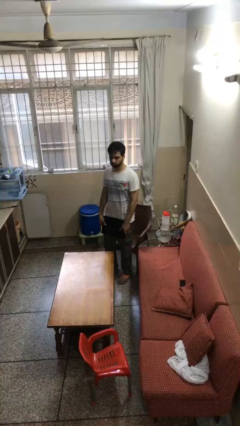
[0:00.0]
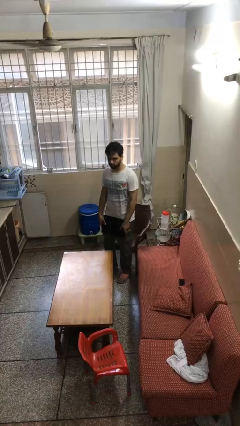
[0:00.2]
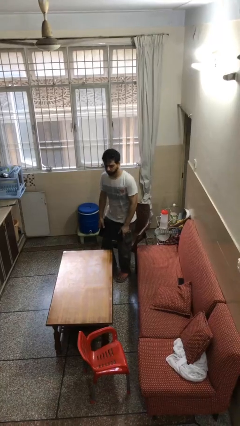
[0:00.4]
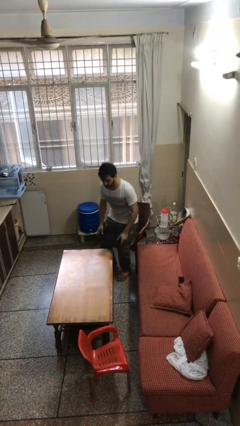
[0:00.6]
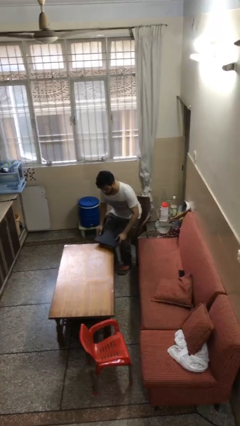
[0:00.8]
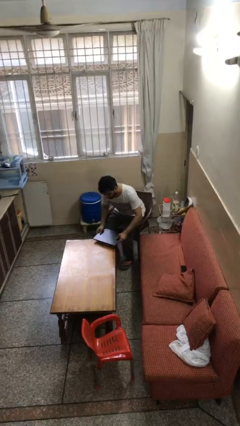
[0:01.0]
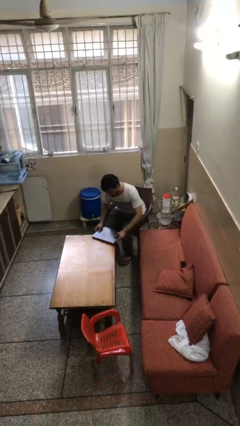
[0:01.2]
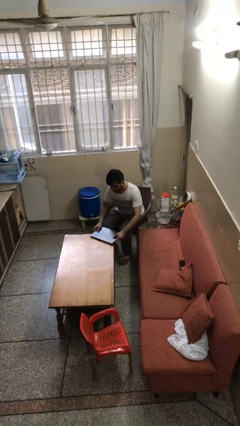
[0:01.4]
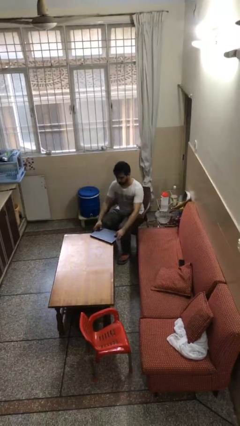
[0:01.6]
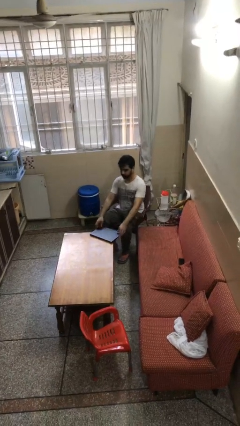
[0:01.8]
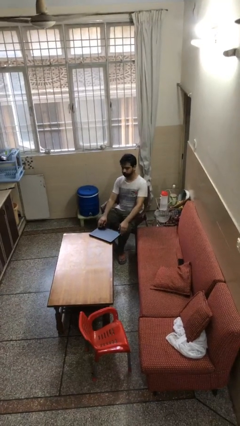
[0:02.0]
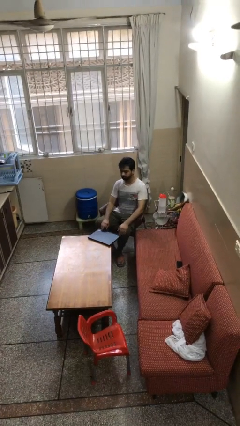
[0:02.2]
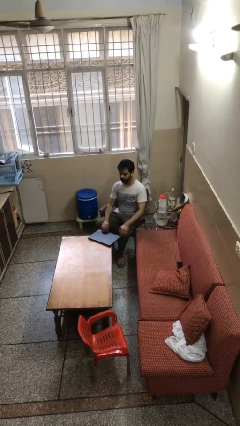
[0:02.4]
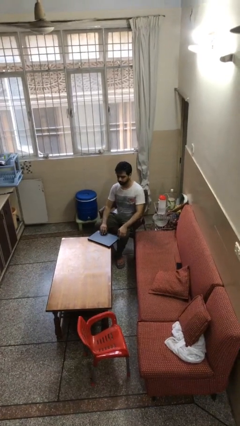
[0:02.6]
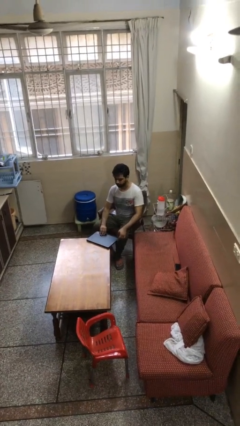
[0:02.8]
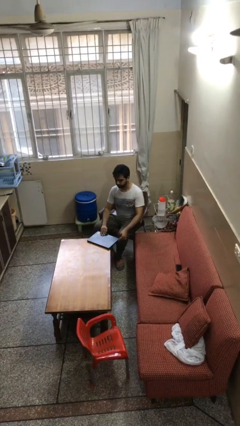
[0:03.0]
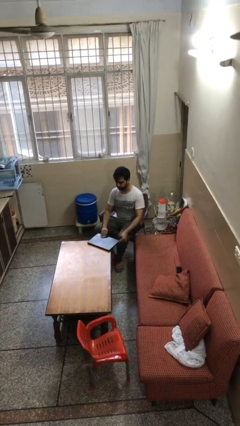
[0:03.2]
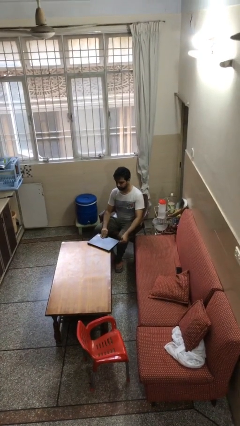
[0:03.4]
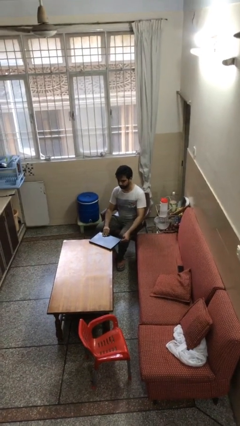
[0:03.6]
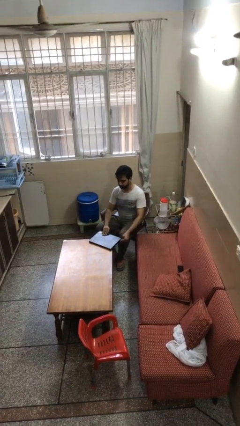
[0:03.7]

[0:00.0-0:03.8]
person sits down

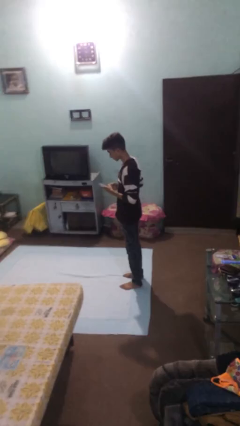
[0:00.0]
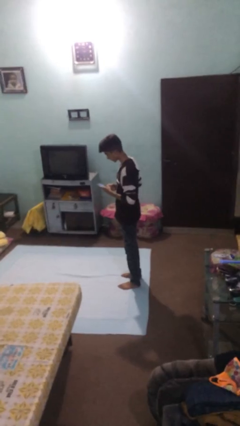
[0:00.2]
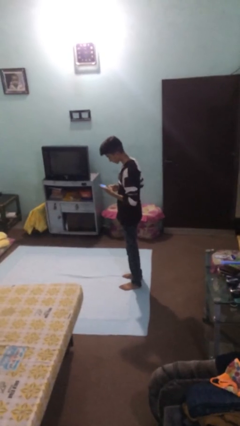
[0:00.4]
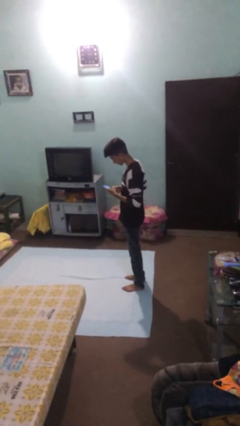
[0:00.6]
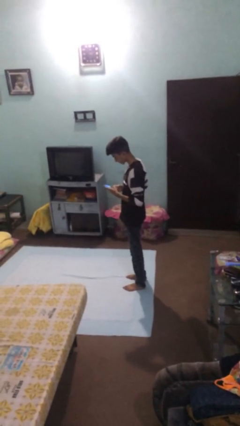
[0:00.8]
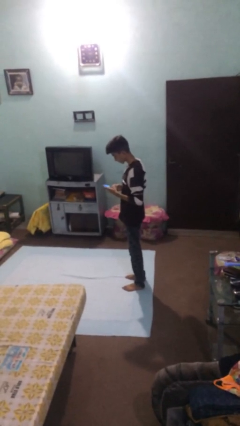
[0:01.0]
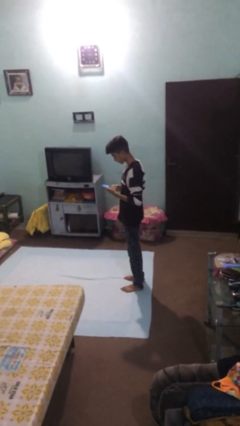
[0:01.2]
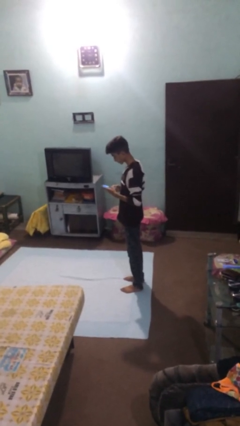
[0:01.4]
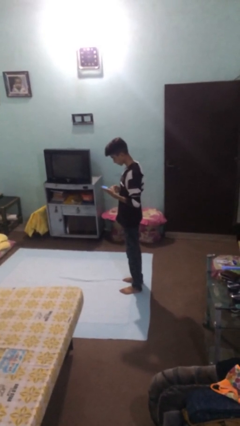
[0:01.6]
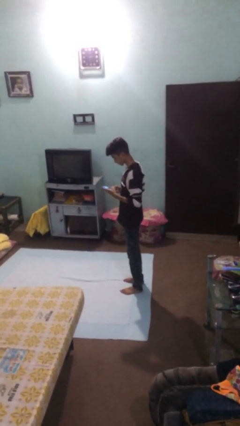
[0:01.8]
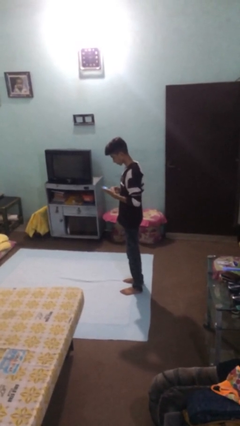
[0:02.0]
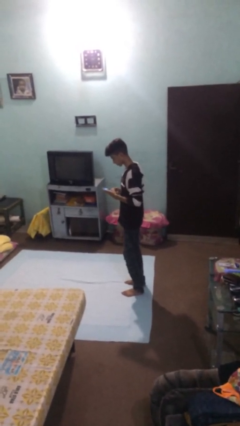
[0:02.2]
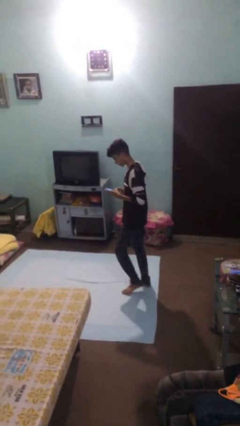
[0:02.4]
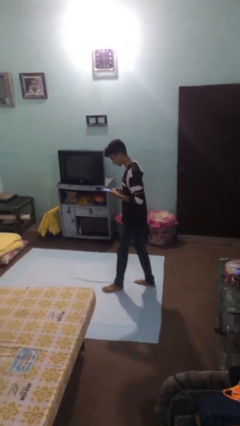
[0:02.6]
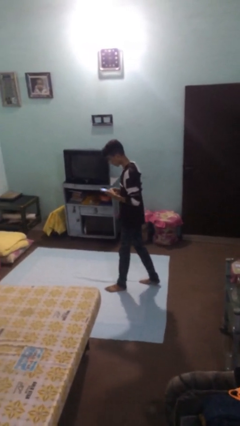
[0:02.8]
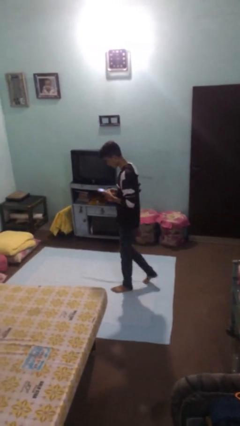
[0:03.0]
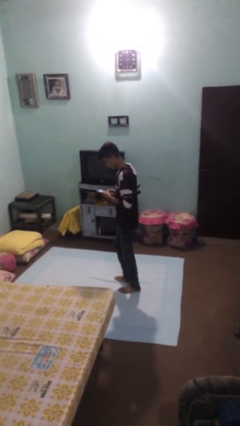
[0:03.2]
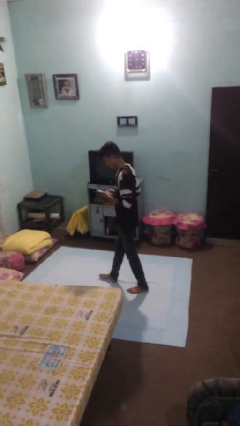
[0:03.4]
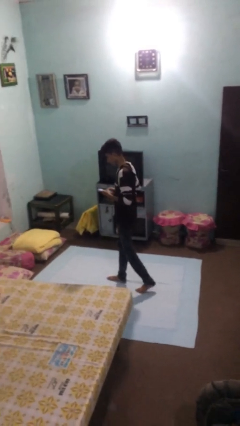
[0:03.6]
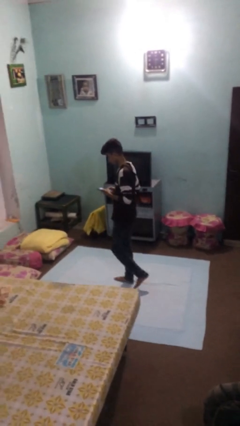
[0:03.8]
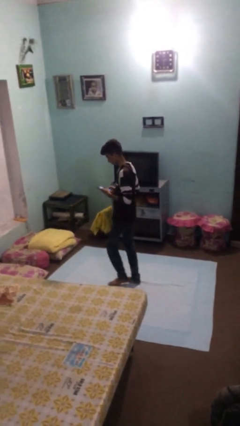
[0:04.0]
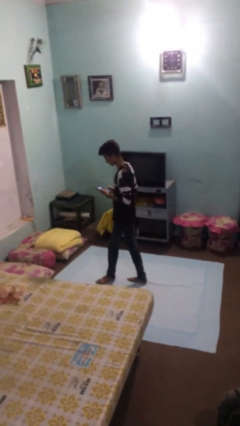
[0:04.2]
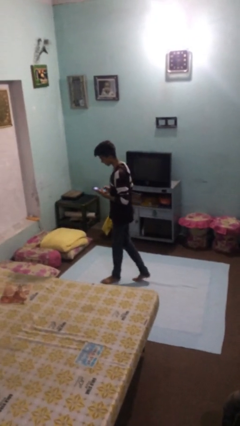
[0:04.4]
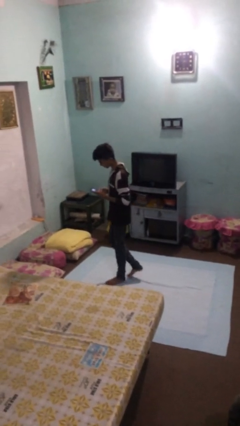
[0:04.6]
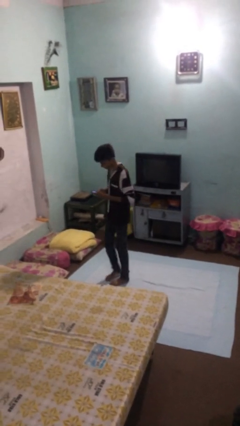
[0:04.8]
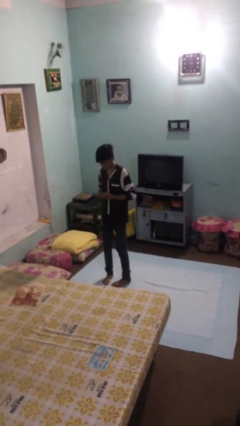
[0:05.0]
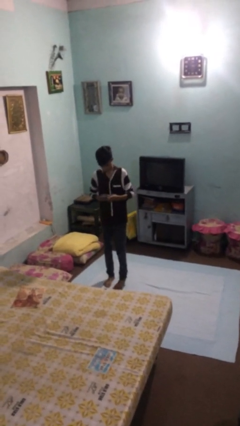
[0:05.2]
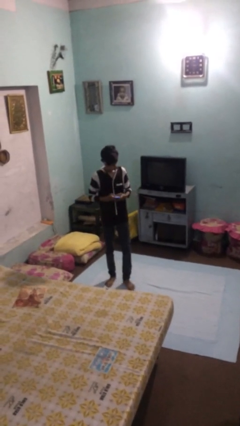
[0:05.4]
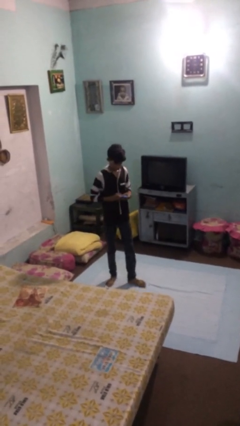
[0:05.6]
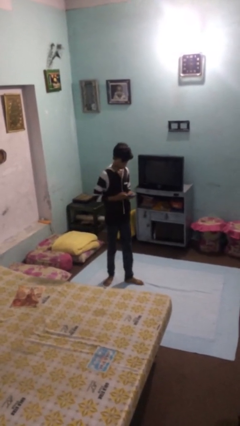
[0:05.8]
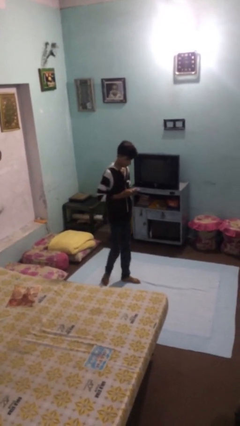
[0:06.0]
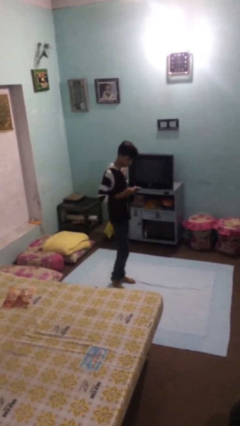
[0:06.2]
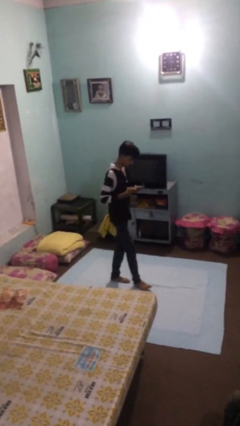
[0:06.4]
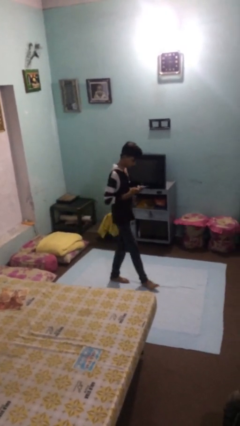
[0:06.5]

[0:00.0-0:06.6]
person texts on phone

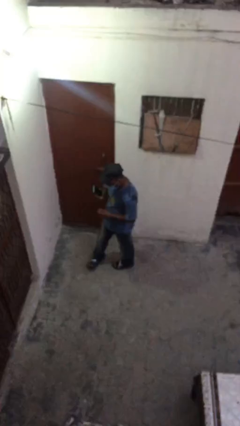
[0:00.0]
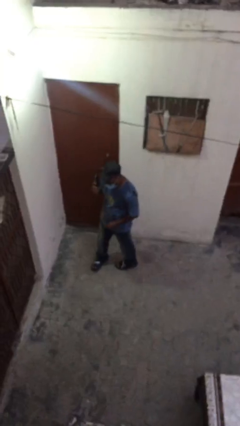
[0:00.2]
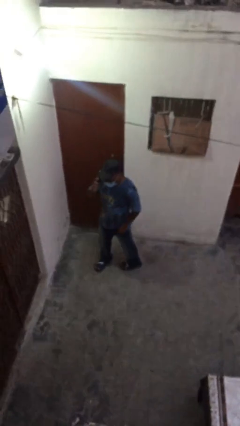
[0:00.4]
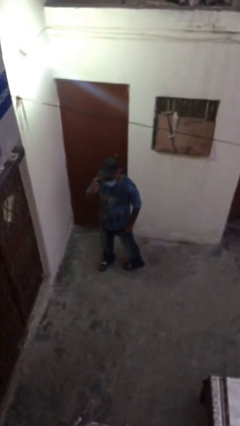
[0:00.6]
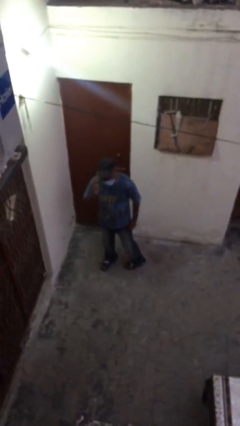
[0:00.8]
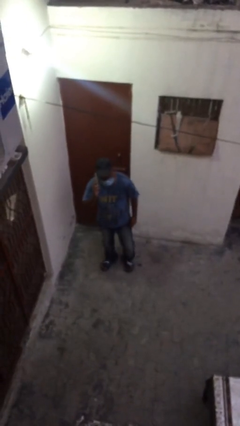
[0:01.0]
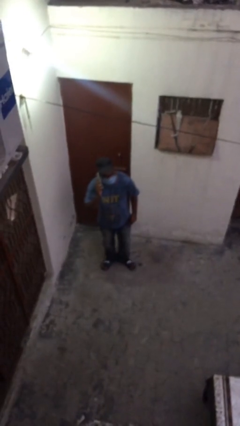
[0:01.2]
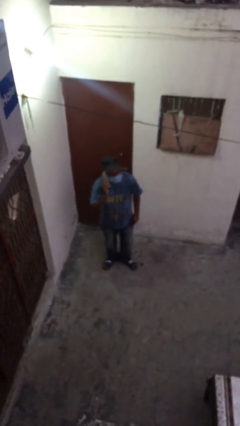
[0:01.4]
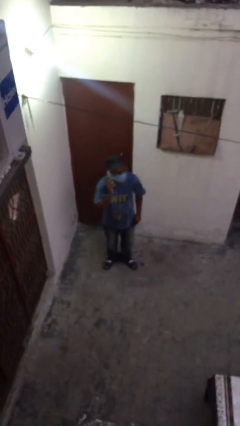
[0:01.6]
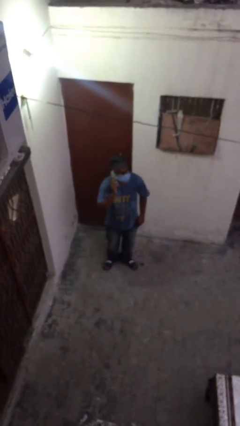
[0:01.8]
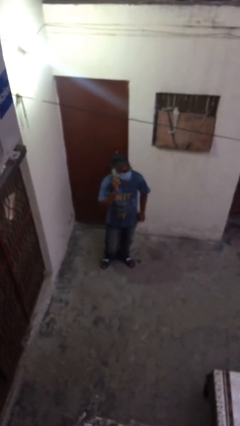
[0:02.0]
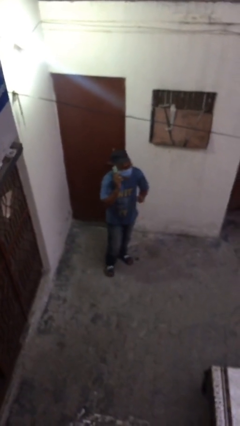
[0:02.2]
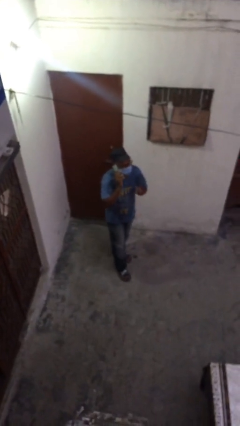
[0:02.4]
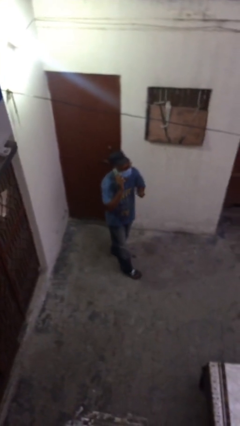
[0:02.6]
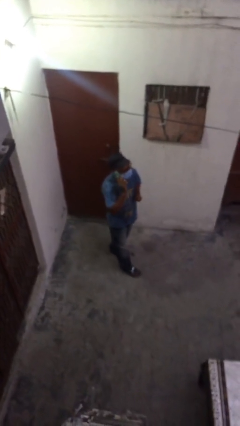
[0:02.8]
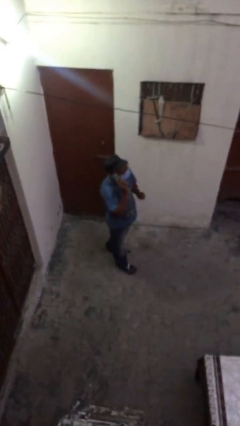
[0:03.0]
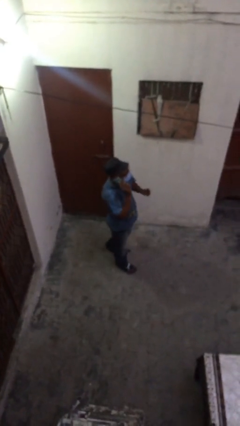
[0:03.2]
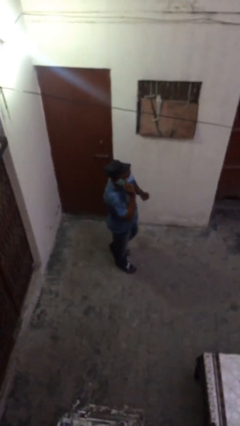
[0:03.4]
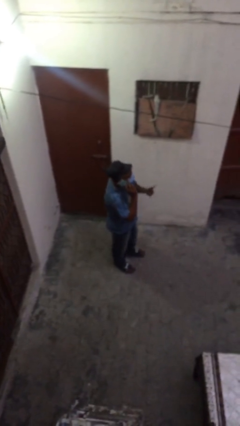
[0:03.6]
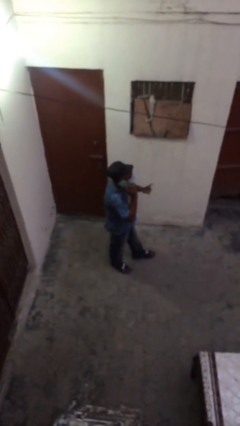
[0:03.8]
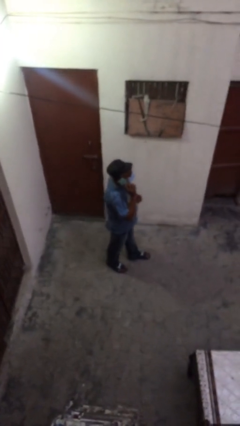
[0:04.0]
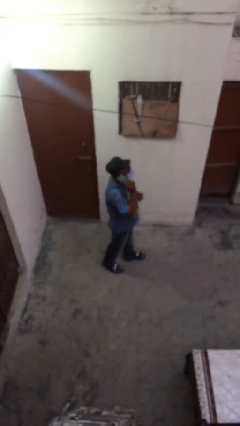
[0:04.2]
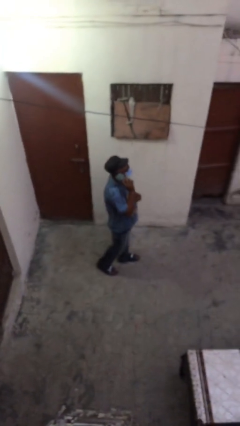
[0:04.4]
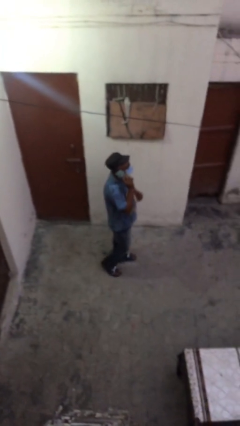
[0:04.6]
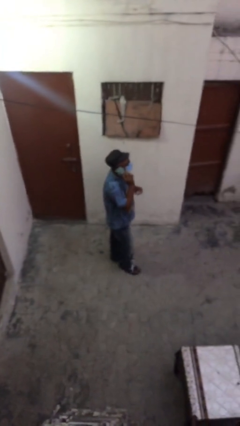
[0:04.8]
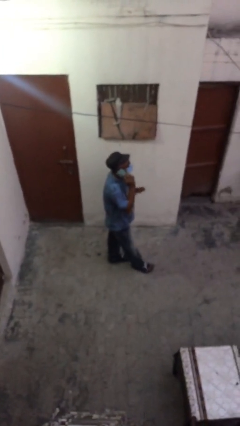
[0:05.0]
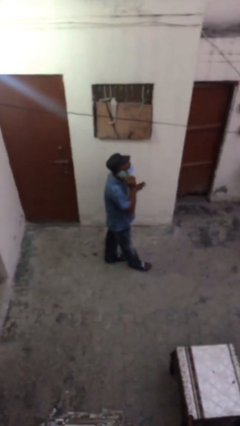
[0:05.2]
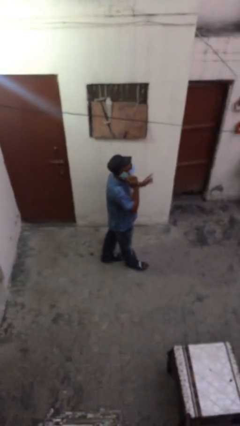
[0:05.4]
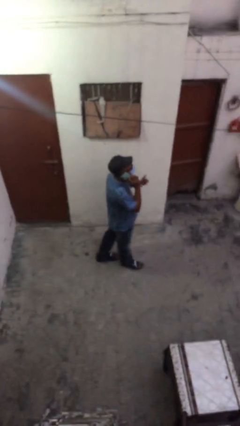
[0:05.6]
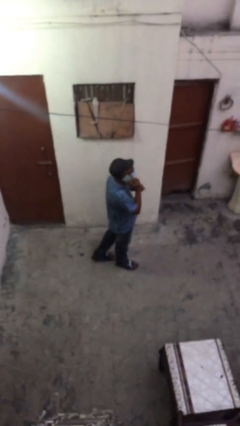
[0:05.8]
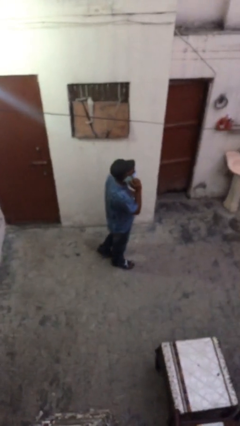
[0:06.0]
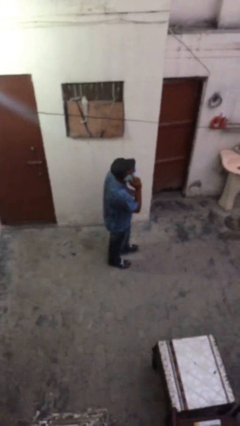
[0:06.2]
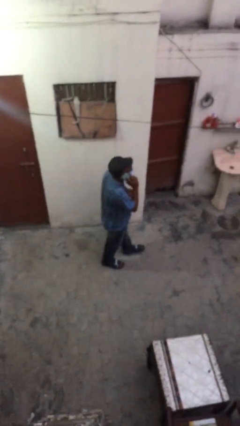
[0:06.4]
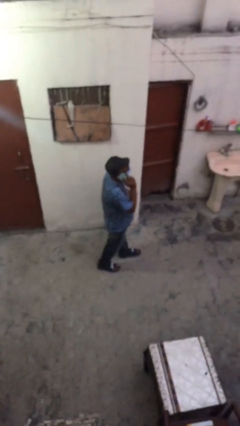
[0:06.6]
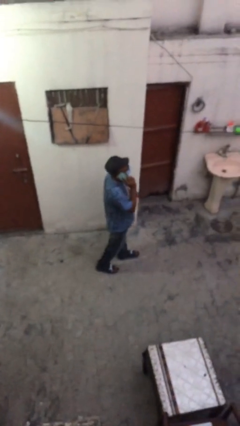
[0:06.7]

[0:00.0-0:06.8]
person talks on phone

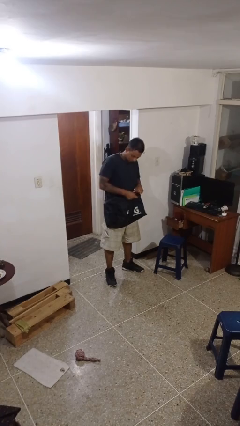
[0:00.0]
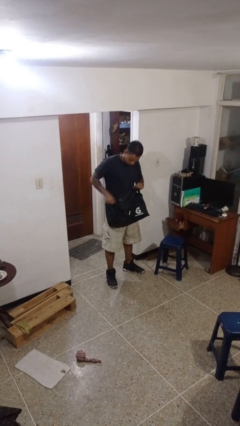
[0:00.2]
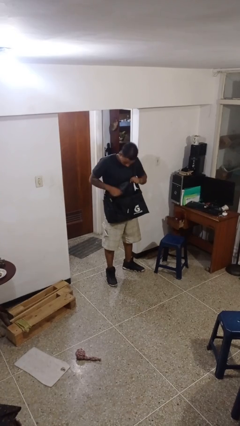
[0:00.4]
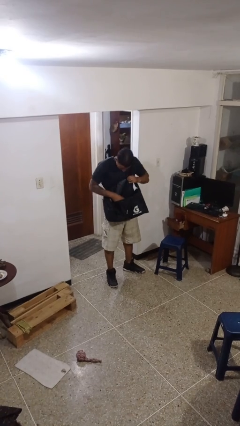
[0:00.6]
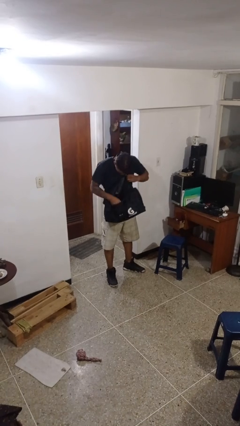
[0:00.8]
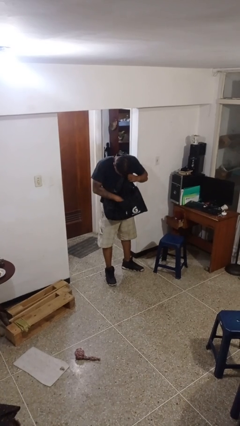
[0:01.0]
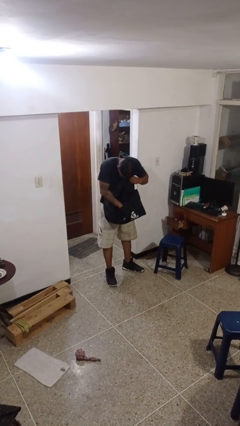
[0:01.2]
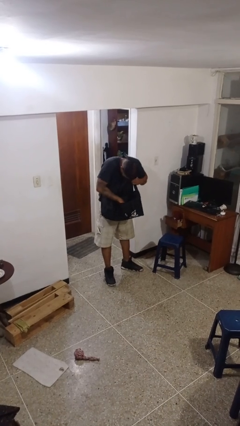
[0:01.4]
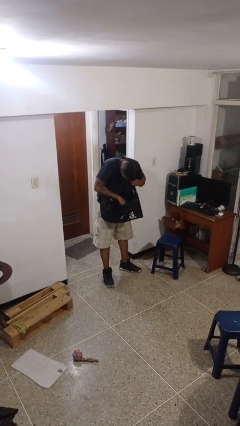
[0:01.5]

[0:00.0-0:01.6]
person searches in purse
